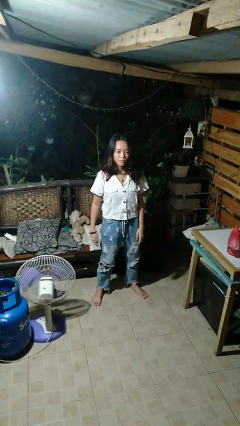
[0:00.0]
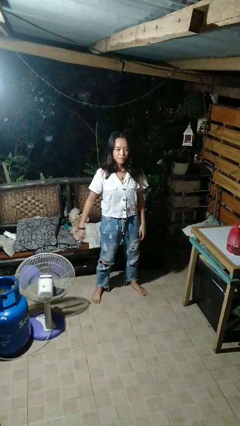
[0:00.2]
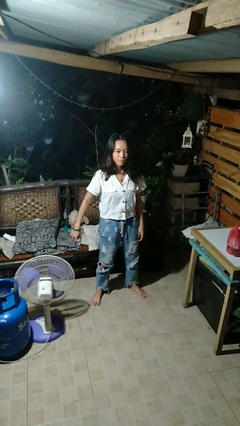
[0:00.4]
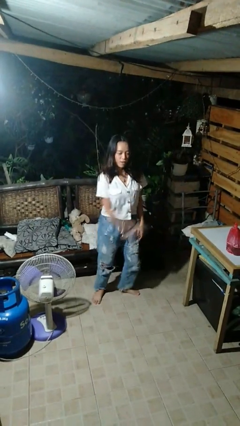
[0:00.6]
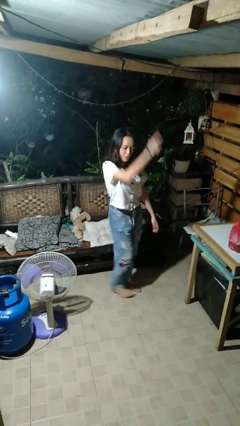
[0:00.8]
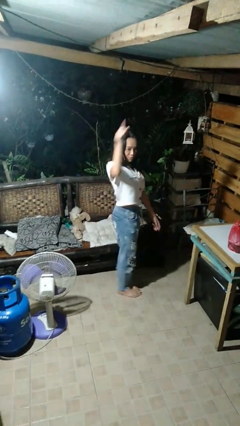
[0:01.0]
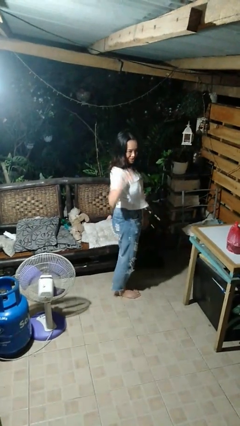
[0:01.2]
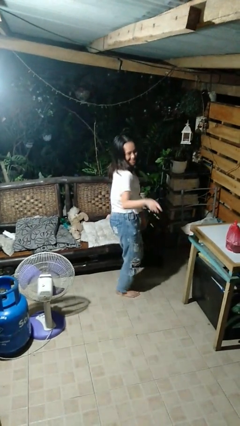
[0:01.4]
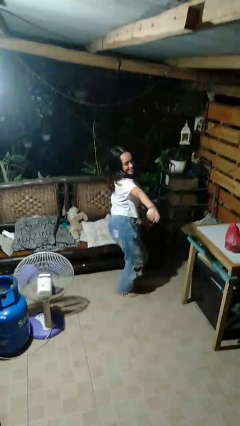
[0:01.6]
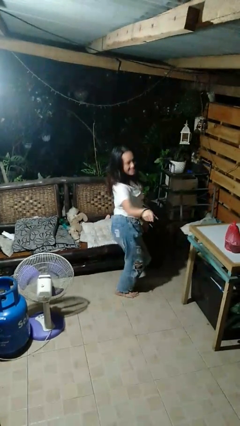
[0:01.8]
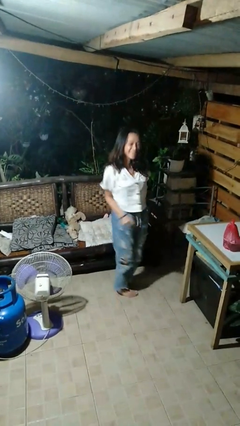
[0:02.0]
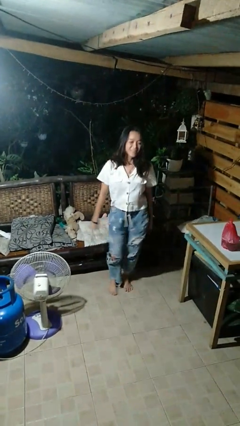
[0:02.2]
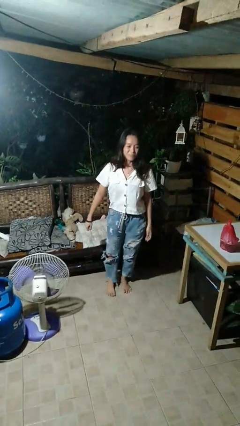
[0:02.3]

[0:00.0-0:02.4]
person dances in place

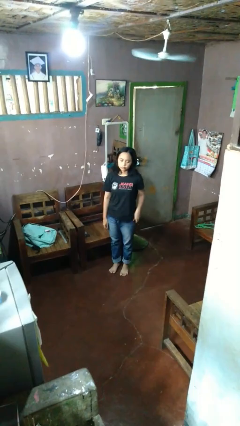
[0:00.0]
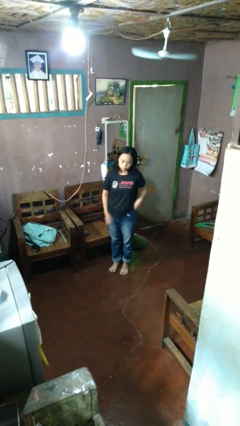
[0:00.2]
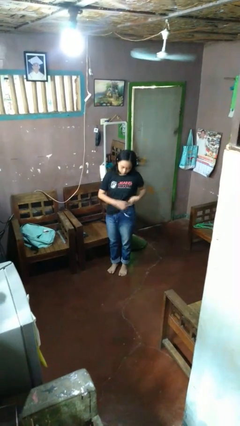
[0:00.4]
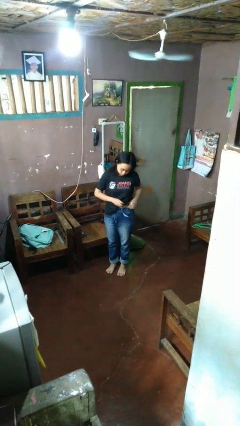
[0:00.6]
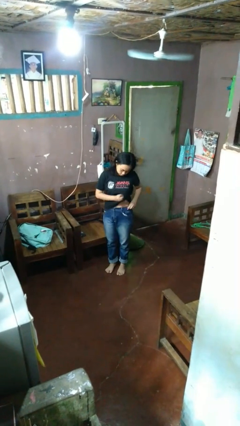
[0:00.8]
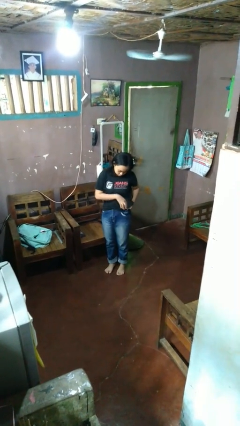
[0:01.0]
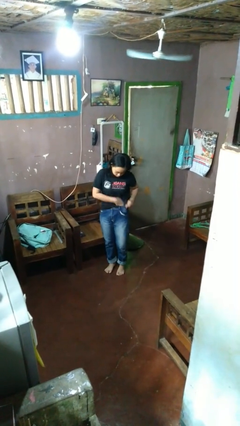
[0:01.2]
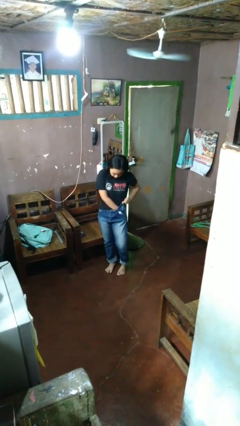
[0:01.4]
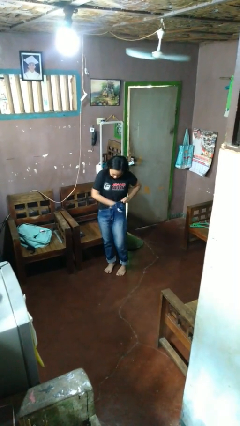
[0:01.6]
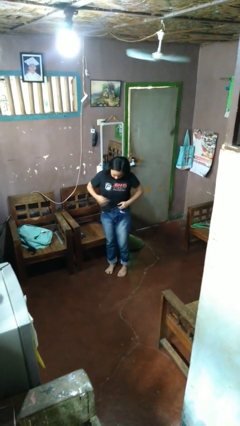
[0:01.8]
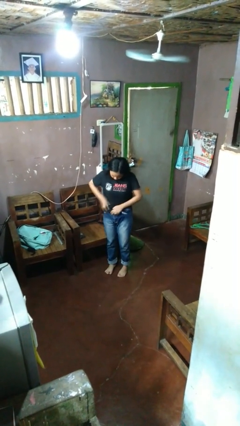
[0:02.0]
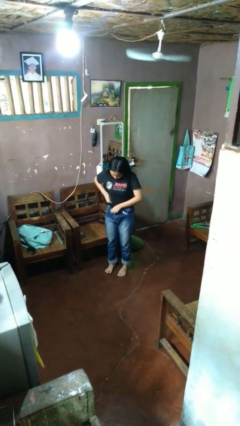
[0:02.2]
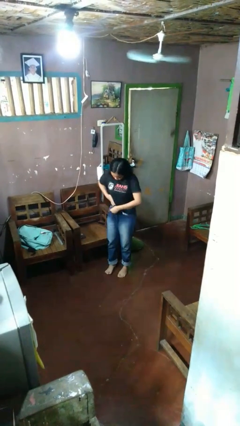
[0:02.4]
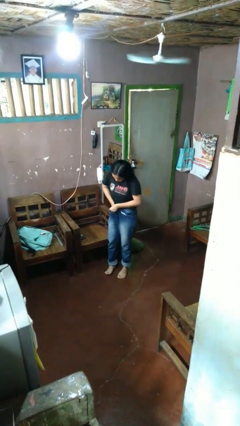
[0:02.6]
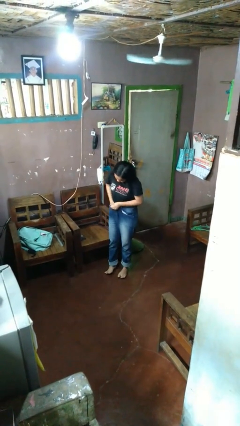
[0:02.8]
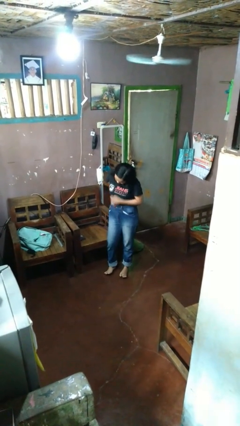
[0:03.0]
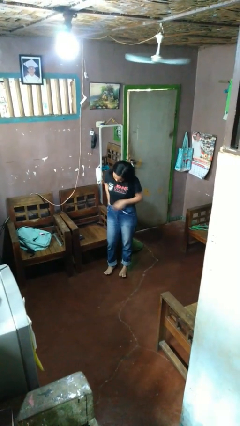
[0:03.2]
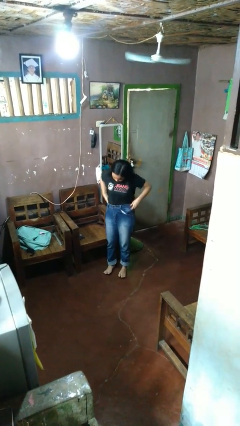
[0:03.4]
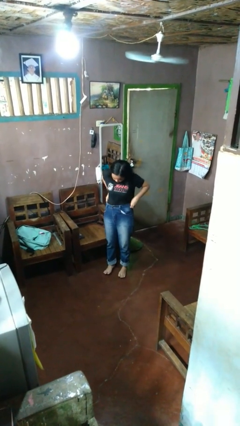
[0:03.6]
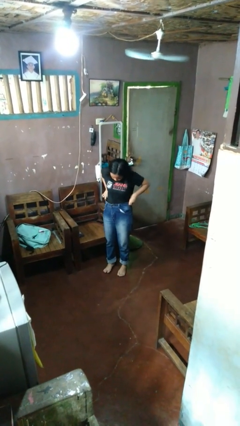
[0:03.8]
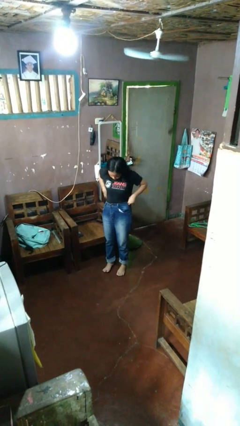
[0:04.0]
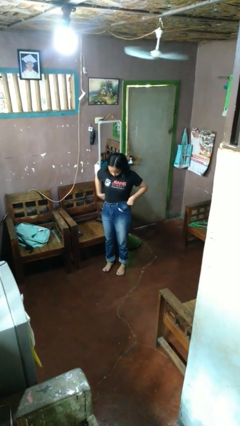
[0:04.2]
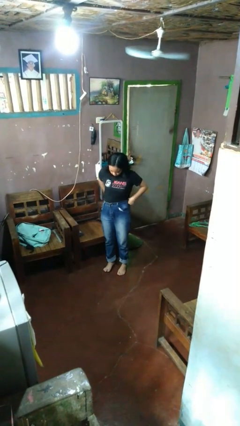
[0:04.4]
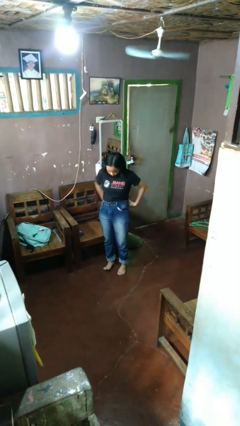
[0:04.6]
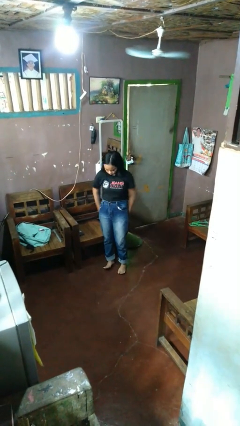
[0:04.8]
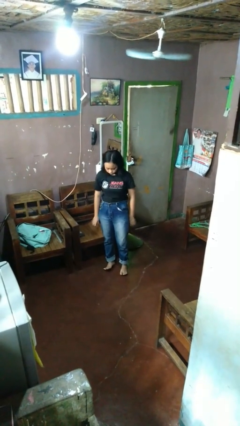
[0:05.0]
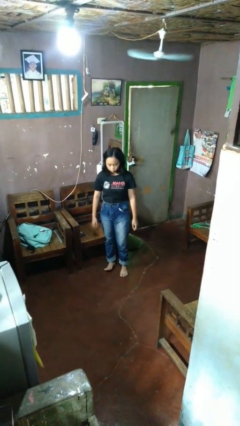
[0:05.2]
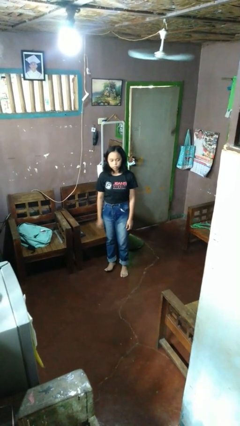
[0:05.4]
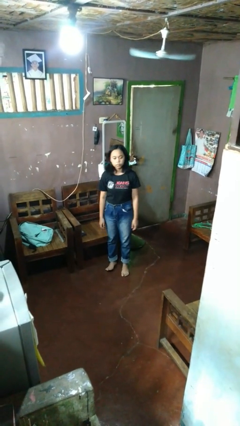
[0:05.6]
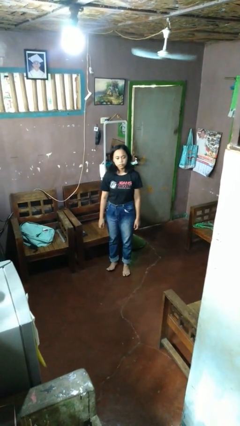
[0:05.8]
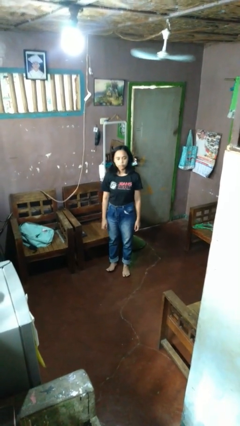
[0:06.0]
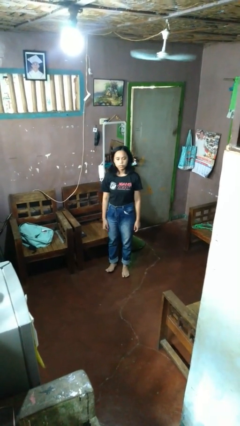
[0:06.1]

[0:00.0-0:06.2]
person tucks in shirt

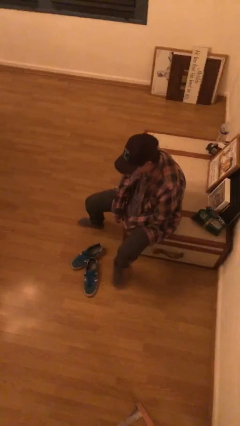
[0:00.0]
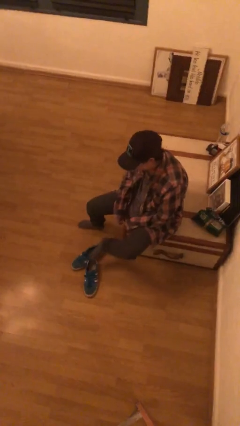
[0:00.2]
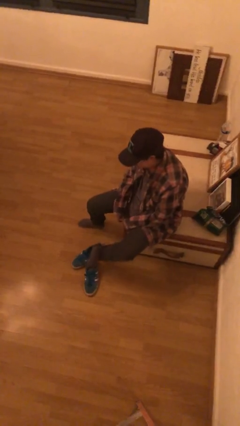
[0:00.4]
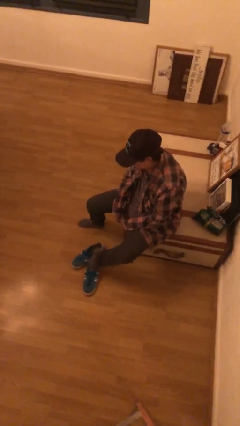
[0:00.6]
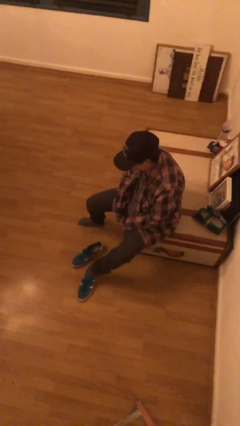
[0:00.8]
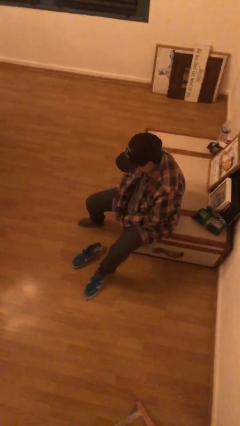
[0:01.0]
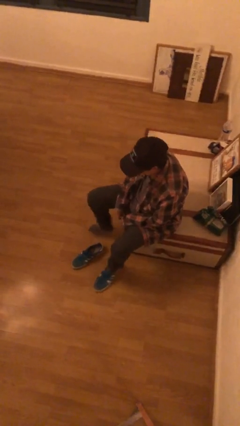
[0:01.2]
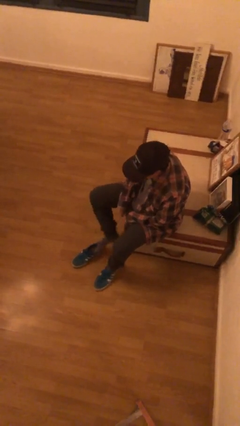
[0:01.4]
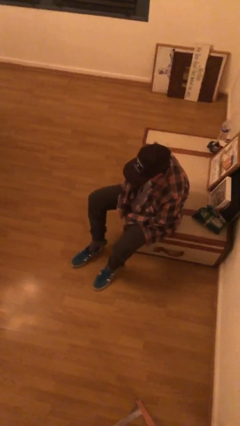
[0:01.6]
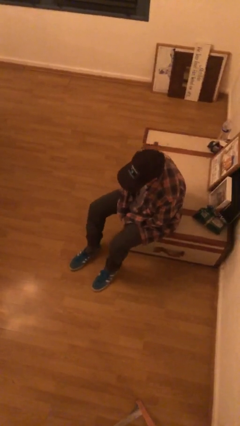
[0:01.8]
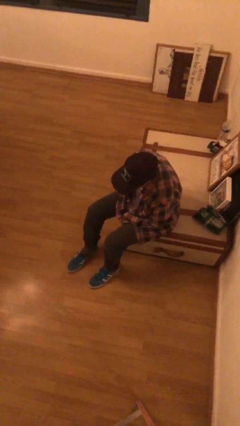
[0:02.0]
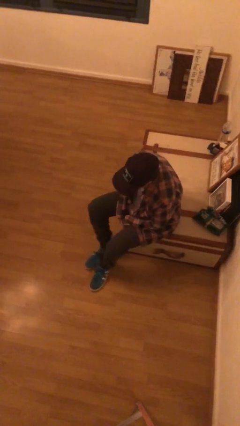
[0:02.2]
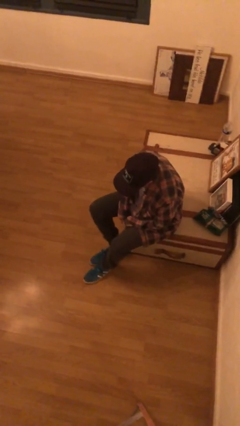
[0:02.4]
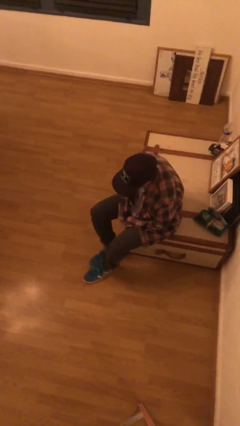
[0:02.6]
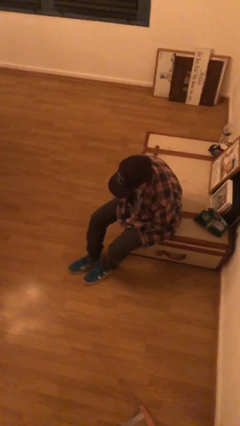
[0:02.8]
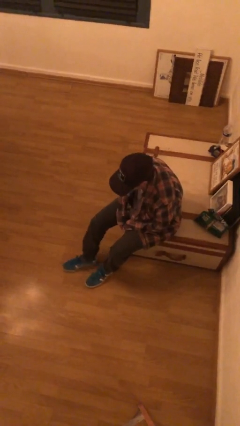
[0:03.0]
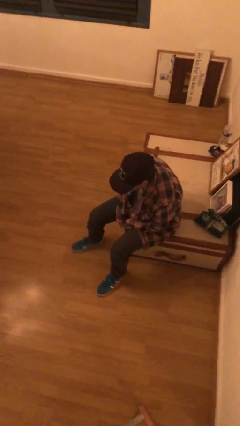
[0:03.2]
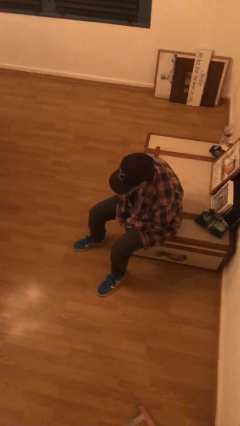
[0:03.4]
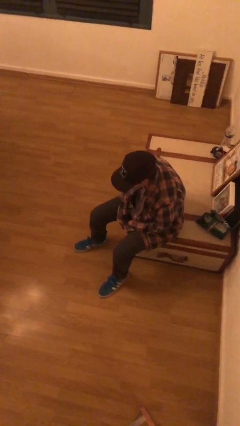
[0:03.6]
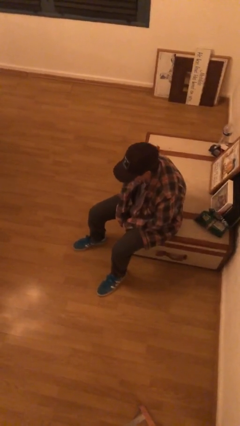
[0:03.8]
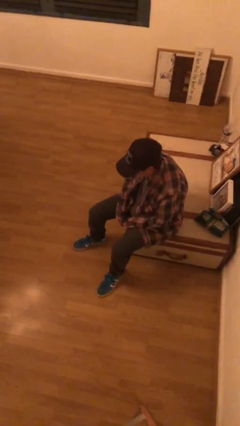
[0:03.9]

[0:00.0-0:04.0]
person puts on shoes

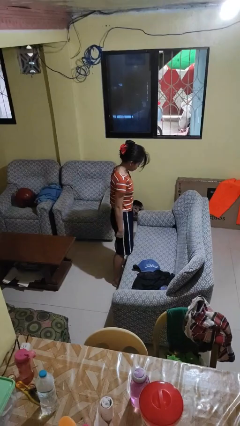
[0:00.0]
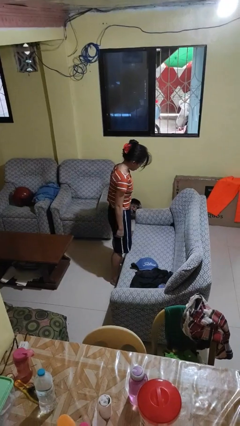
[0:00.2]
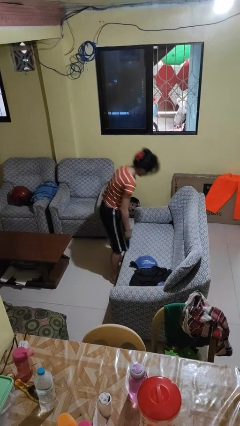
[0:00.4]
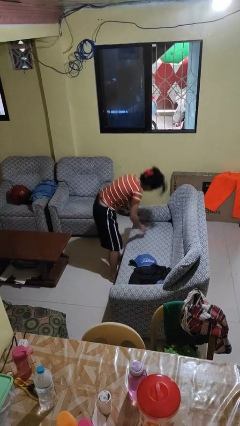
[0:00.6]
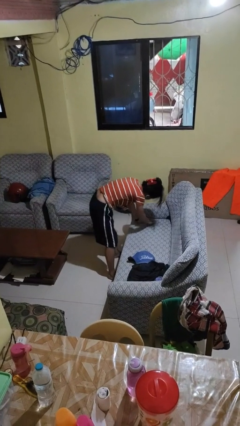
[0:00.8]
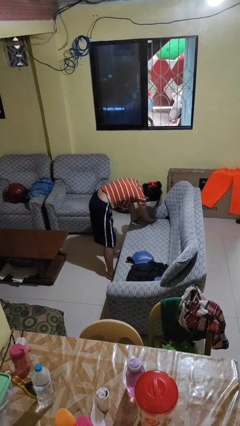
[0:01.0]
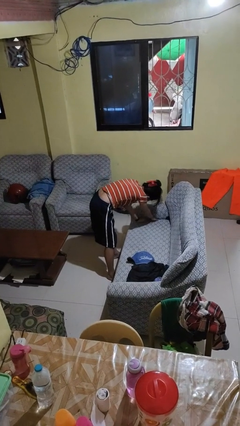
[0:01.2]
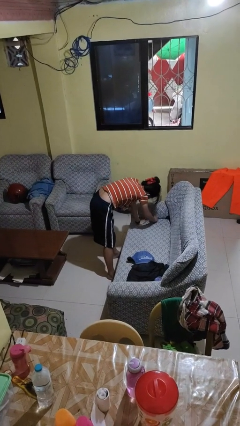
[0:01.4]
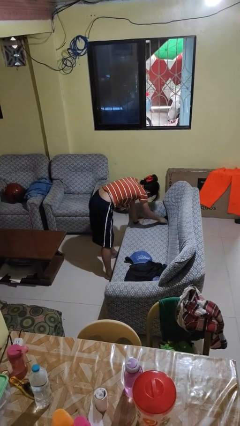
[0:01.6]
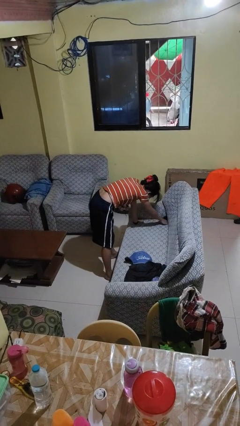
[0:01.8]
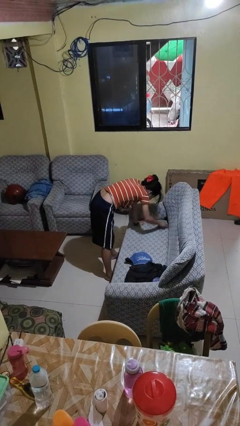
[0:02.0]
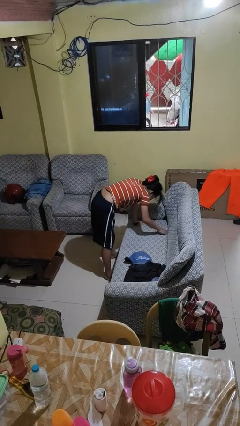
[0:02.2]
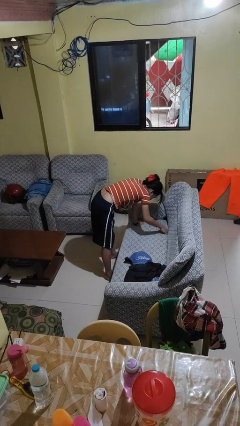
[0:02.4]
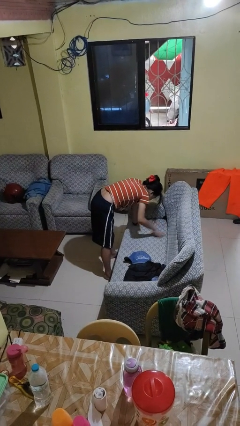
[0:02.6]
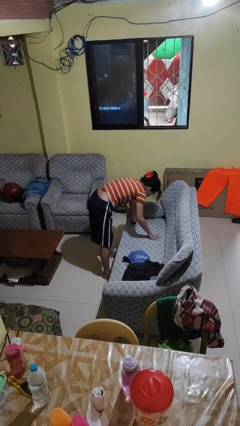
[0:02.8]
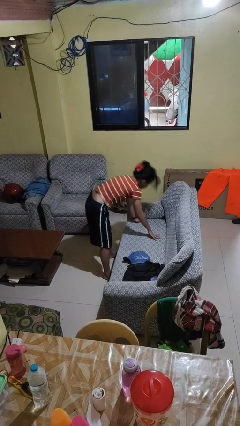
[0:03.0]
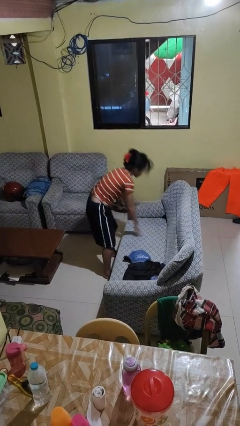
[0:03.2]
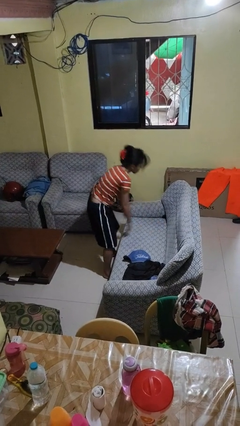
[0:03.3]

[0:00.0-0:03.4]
person searches in couch

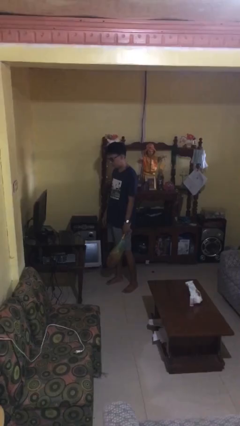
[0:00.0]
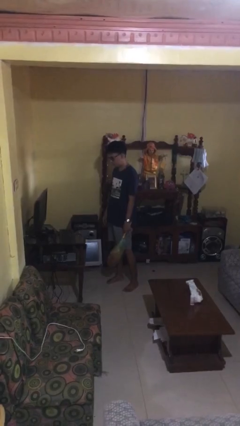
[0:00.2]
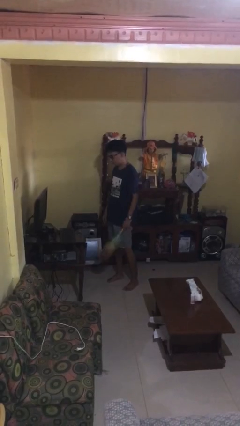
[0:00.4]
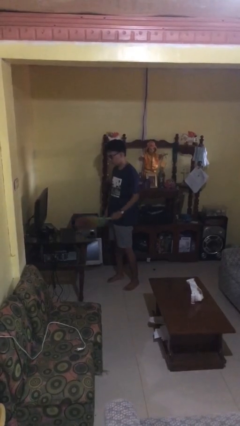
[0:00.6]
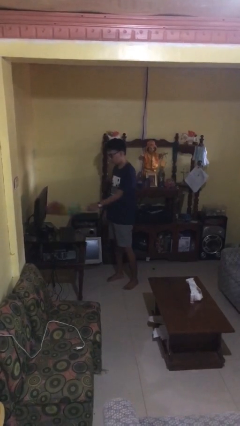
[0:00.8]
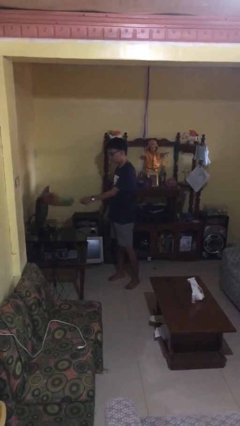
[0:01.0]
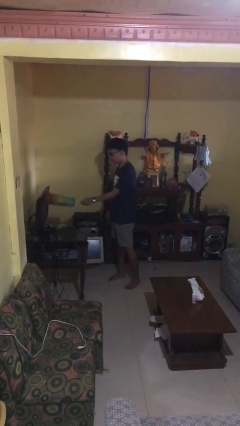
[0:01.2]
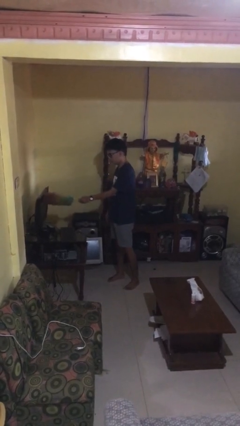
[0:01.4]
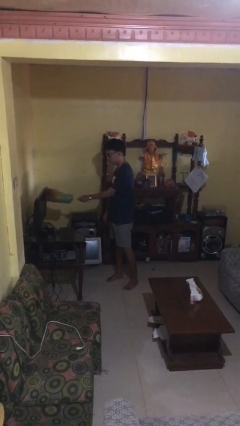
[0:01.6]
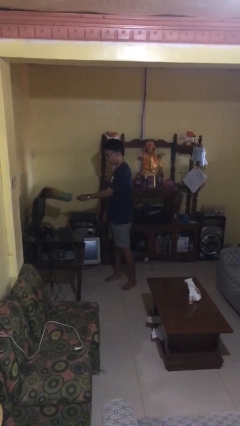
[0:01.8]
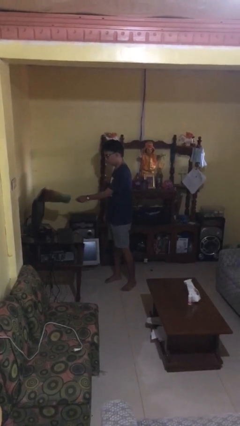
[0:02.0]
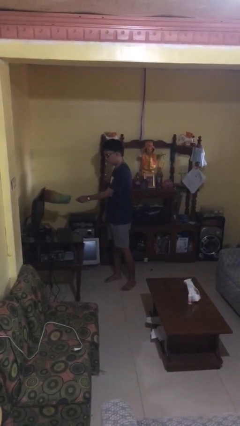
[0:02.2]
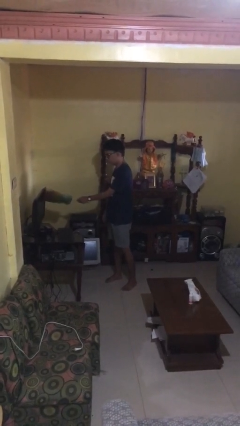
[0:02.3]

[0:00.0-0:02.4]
person dusts furniture
